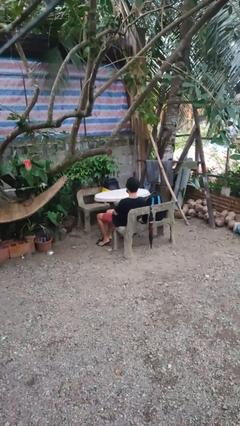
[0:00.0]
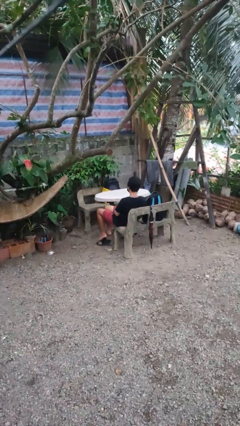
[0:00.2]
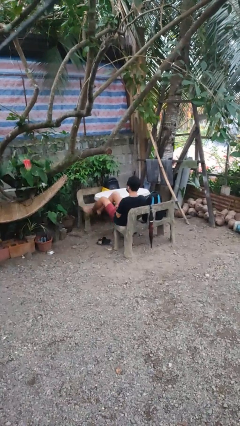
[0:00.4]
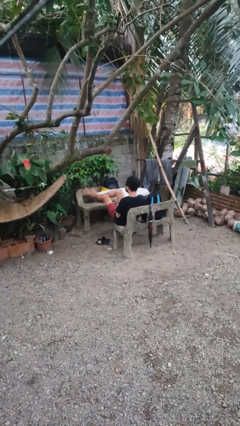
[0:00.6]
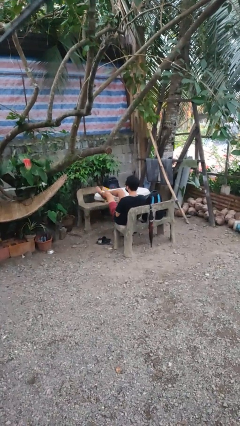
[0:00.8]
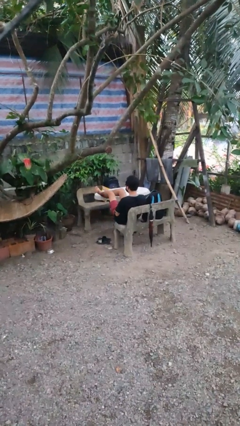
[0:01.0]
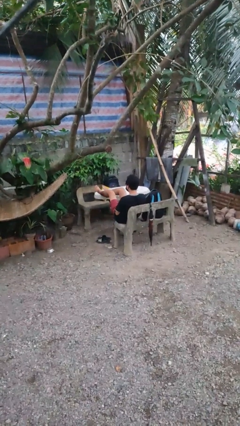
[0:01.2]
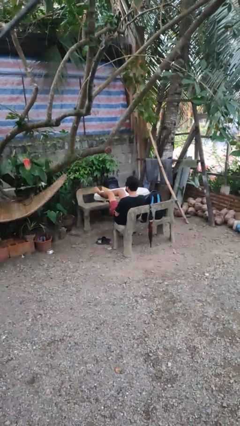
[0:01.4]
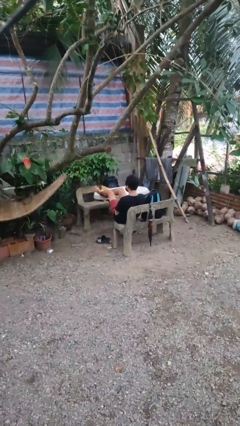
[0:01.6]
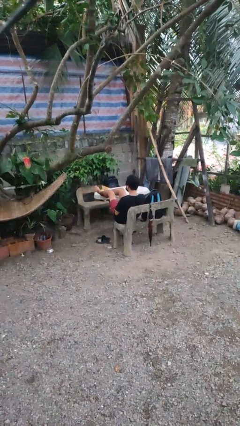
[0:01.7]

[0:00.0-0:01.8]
person puts feet up

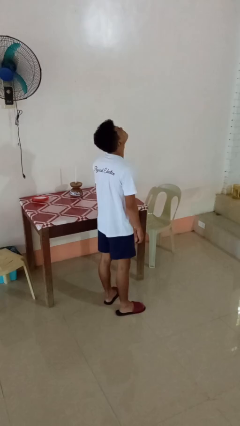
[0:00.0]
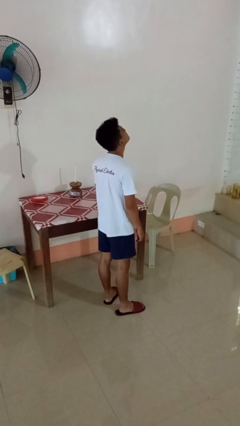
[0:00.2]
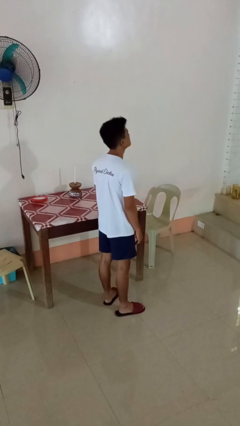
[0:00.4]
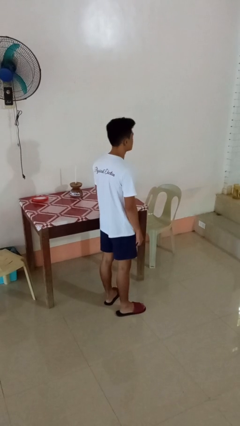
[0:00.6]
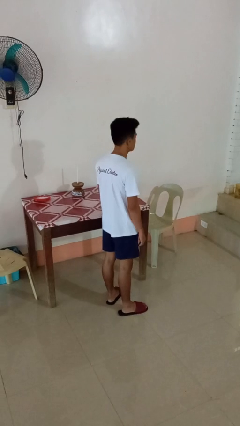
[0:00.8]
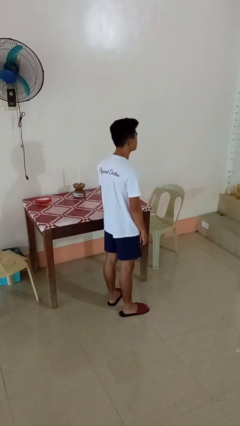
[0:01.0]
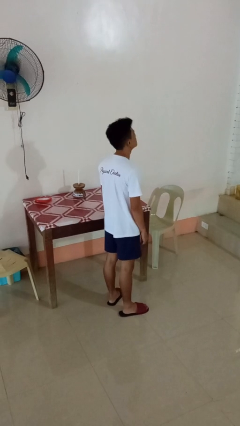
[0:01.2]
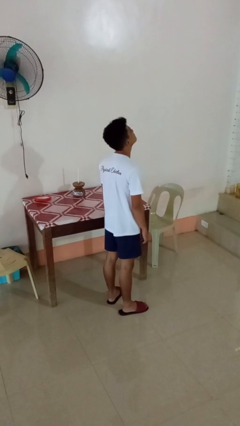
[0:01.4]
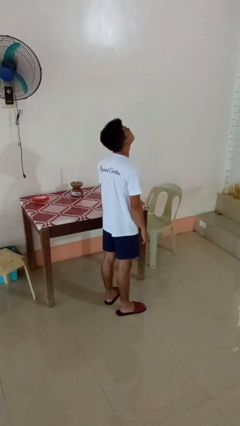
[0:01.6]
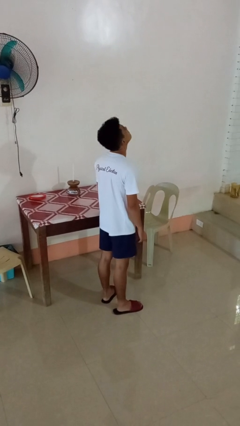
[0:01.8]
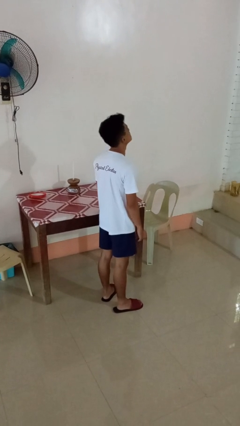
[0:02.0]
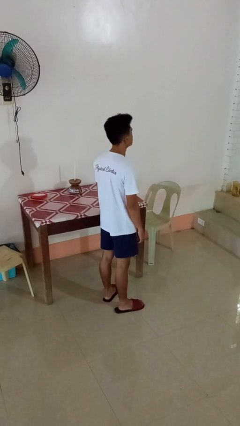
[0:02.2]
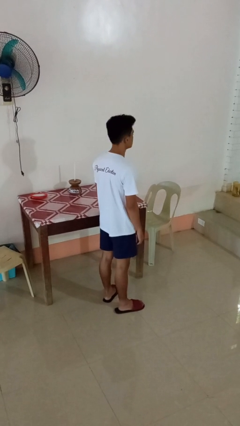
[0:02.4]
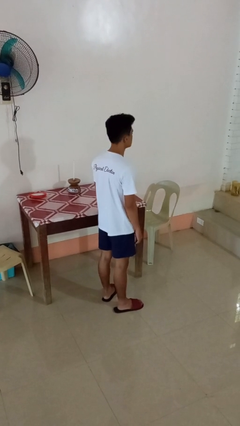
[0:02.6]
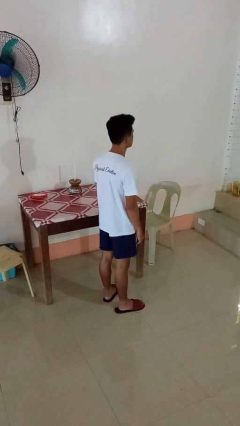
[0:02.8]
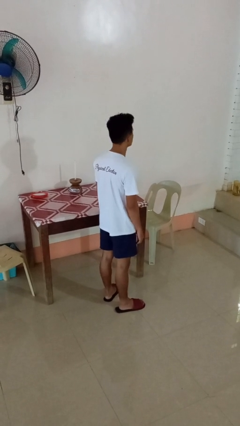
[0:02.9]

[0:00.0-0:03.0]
person nods head

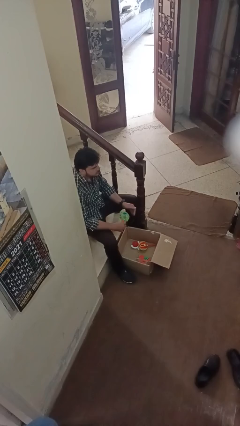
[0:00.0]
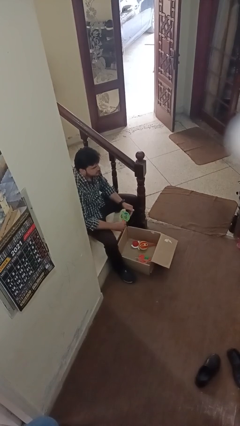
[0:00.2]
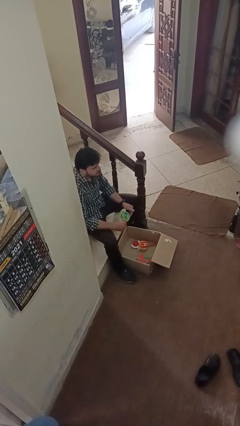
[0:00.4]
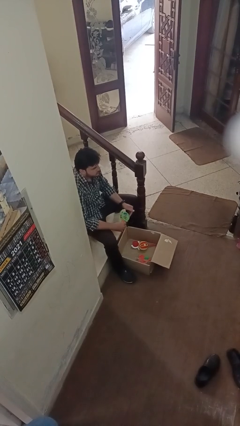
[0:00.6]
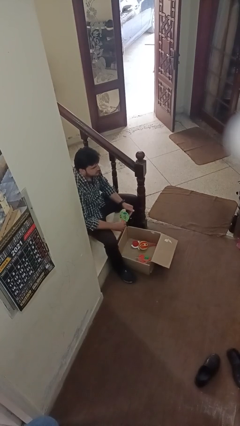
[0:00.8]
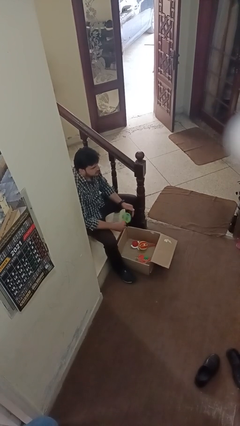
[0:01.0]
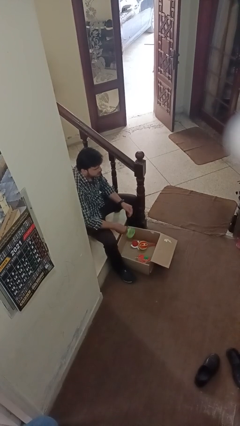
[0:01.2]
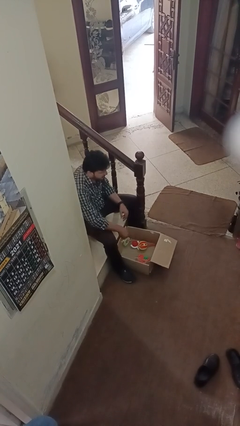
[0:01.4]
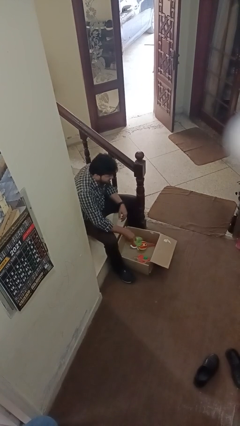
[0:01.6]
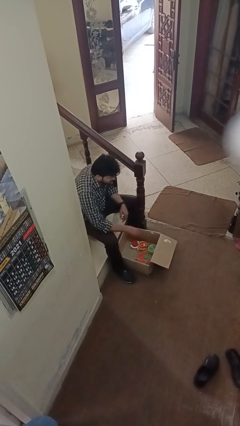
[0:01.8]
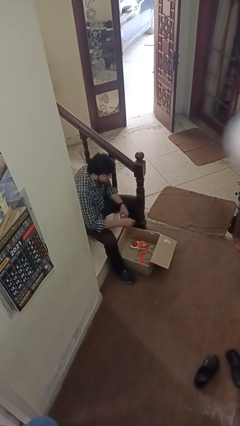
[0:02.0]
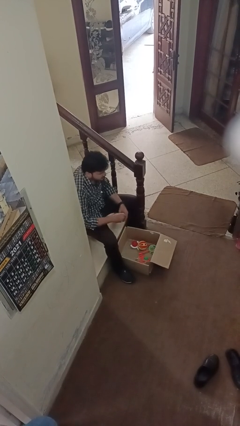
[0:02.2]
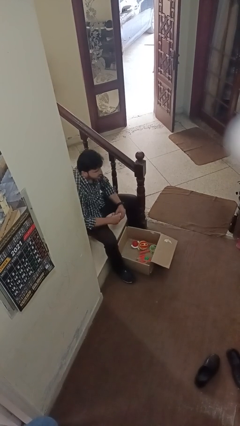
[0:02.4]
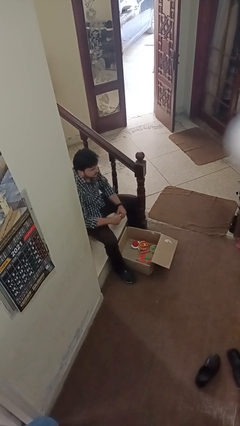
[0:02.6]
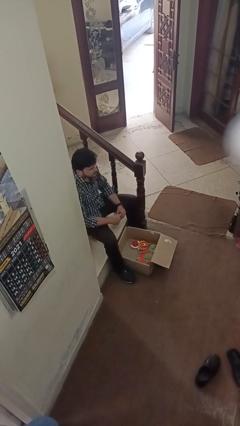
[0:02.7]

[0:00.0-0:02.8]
person puts object into box

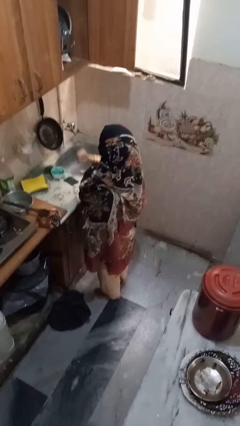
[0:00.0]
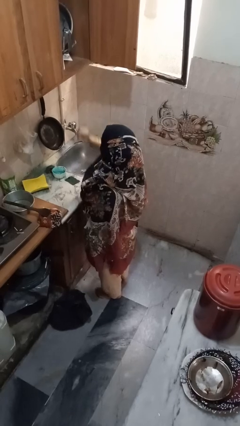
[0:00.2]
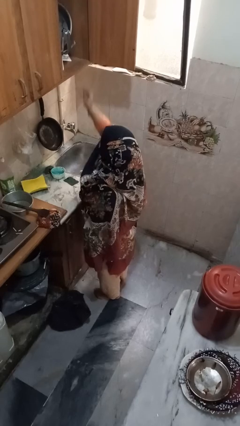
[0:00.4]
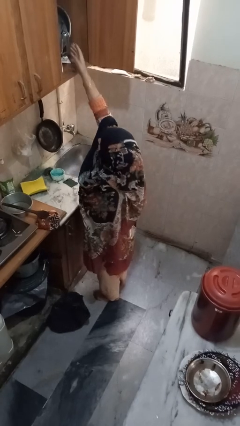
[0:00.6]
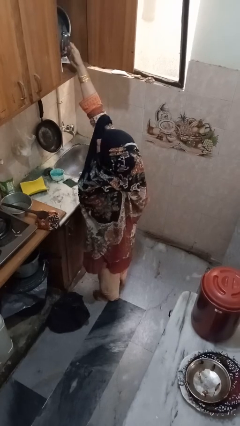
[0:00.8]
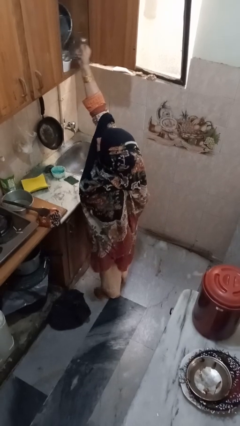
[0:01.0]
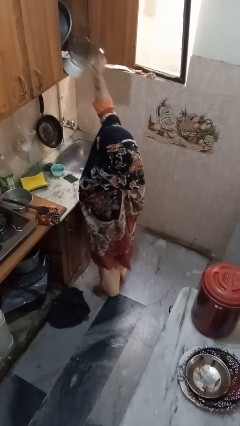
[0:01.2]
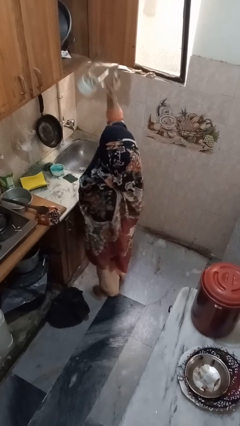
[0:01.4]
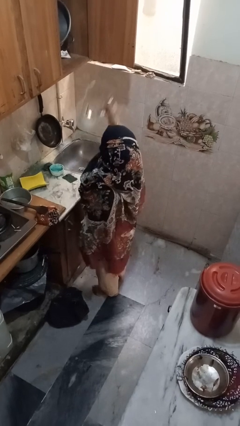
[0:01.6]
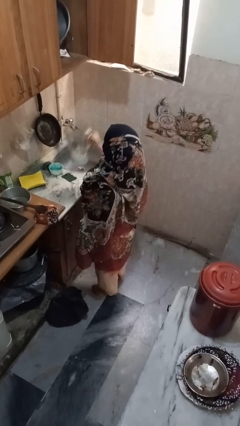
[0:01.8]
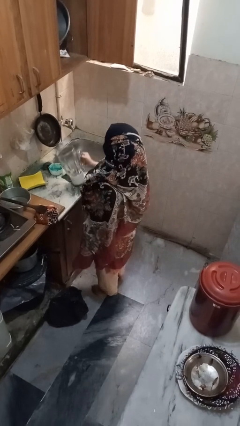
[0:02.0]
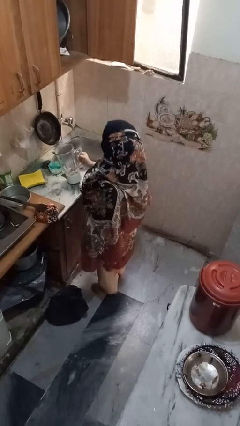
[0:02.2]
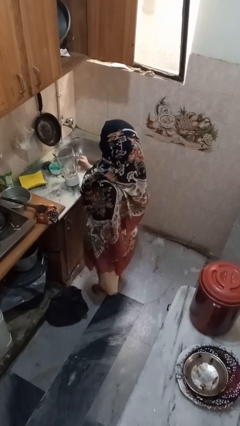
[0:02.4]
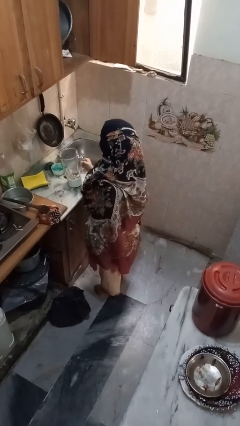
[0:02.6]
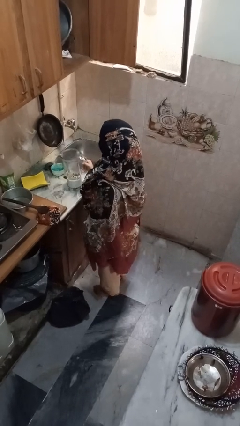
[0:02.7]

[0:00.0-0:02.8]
person puts object in cabinet

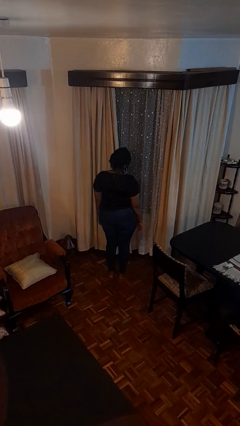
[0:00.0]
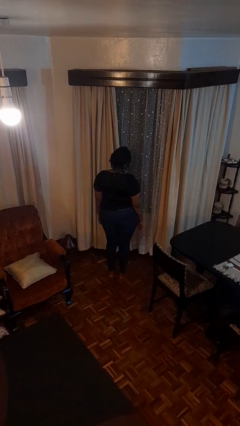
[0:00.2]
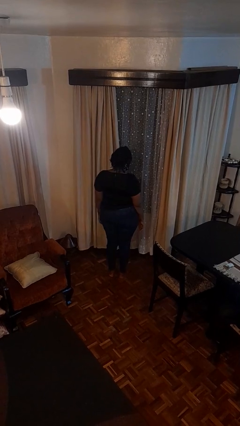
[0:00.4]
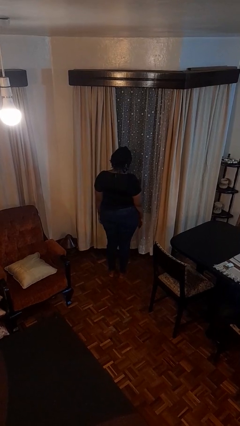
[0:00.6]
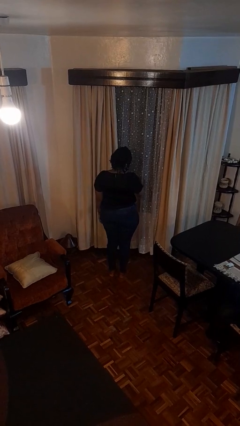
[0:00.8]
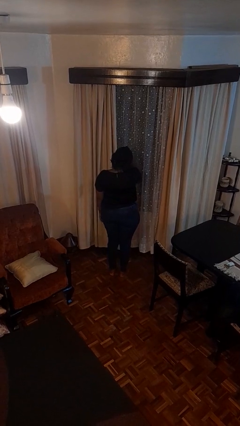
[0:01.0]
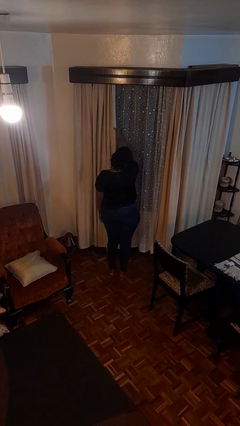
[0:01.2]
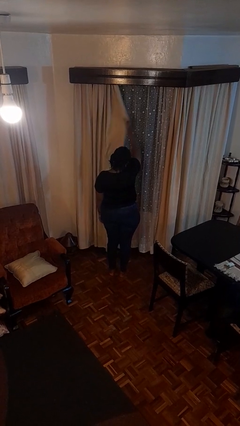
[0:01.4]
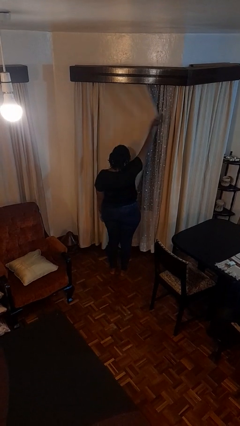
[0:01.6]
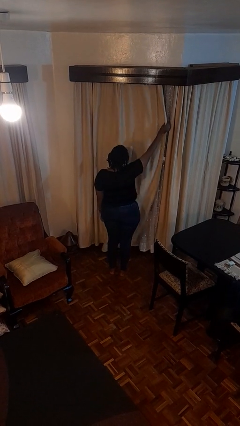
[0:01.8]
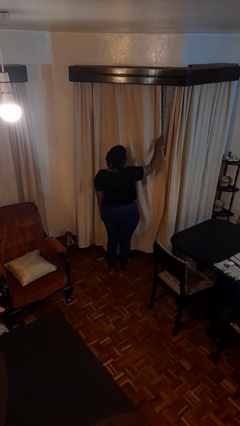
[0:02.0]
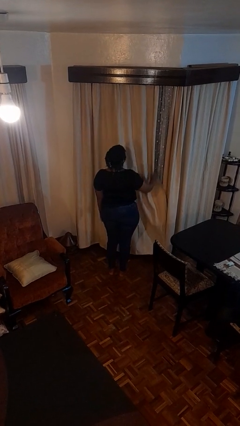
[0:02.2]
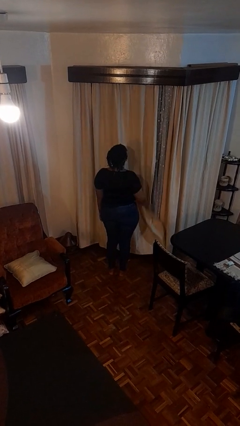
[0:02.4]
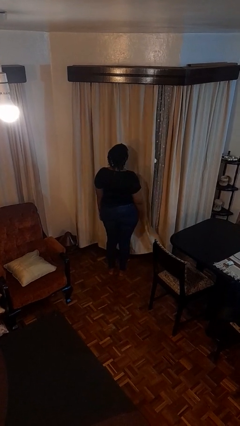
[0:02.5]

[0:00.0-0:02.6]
person closes curtains

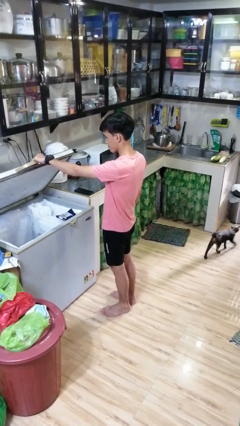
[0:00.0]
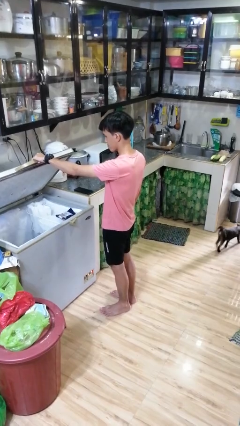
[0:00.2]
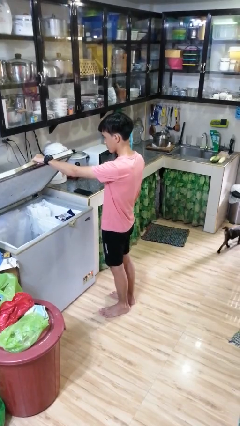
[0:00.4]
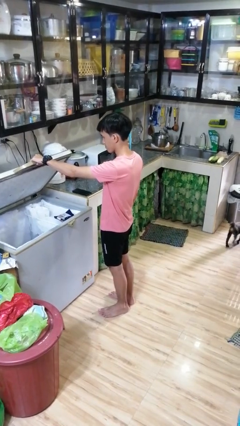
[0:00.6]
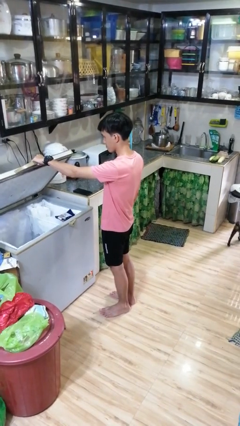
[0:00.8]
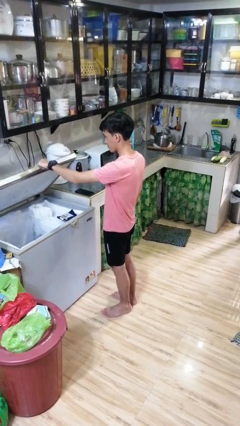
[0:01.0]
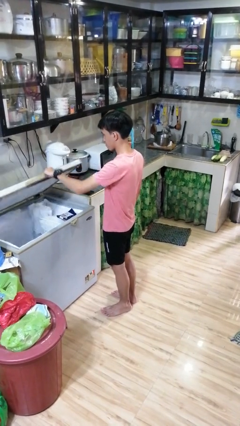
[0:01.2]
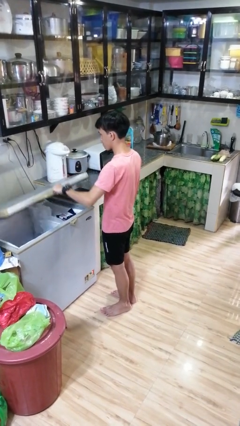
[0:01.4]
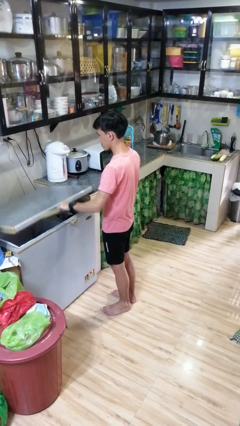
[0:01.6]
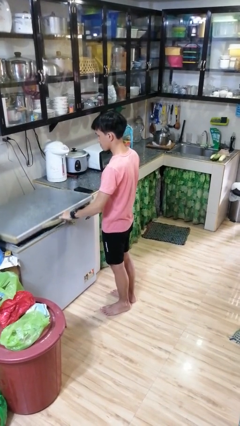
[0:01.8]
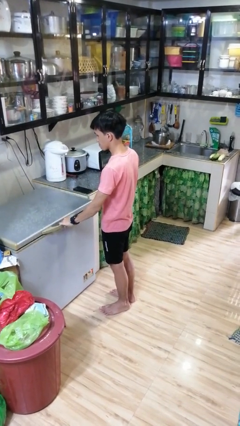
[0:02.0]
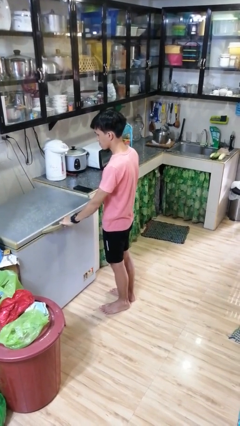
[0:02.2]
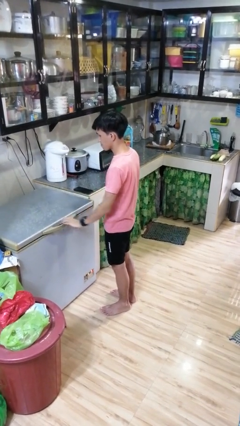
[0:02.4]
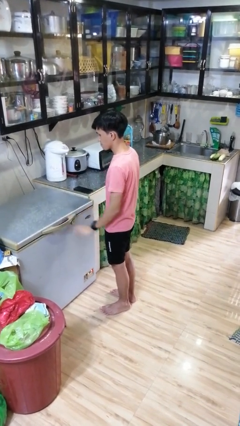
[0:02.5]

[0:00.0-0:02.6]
person closes refrigerator

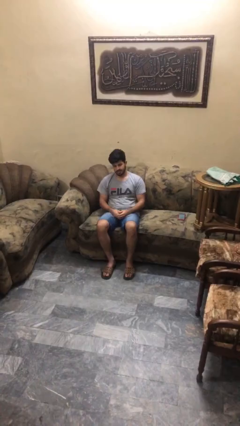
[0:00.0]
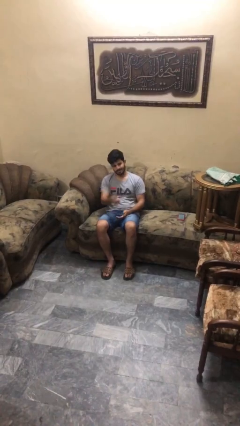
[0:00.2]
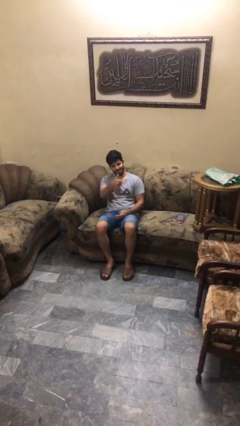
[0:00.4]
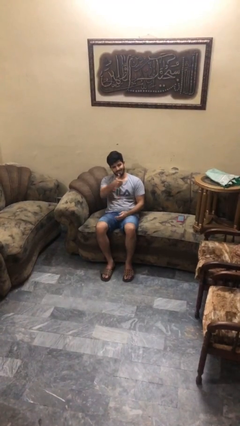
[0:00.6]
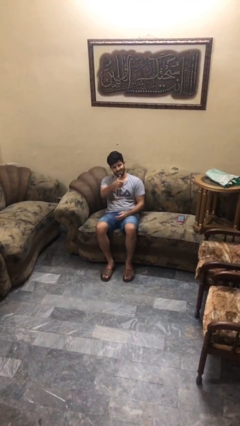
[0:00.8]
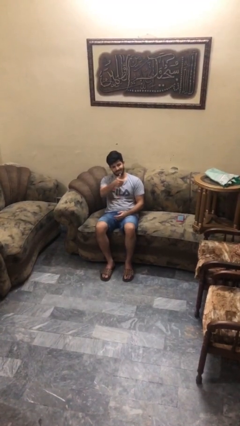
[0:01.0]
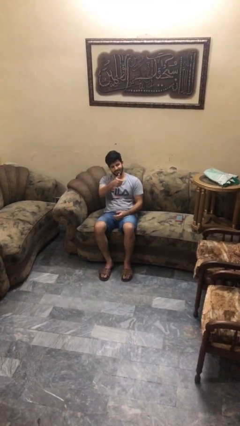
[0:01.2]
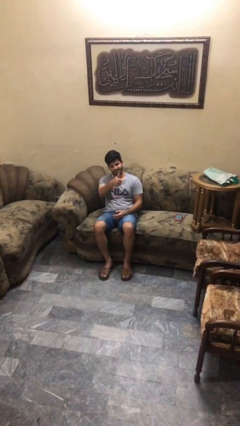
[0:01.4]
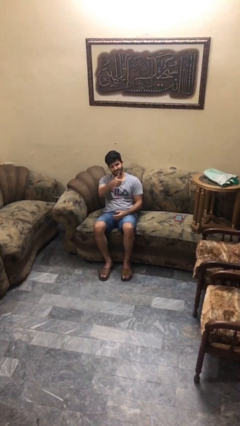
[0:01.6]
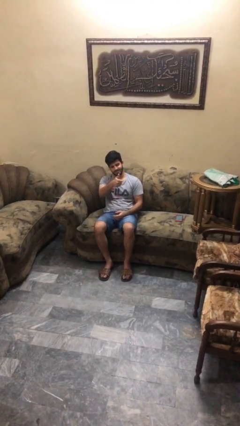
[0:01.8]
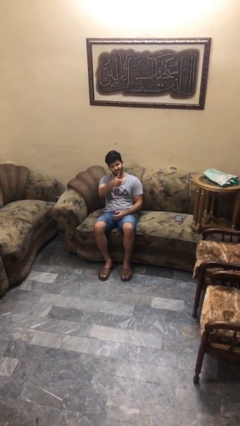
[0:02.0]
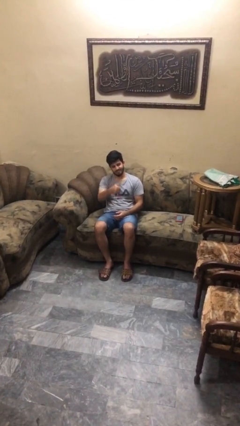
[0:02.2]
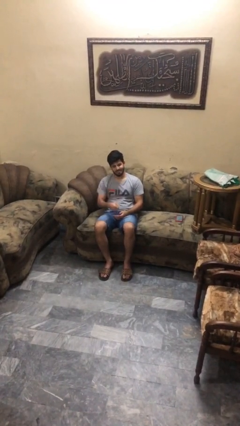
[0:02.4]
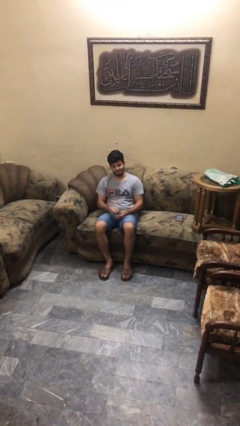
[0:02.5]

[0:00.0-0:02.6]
person gestures thumbs up
